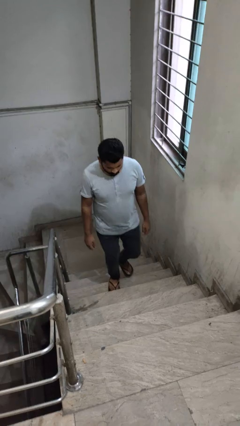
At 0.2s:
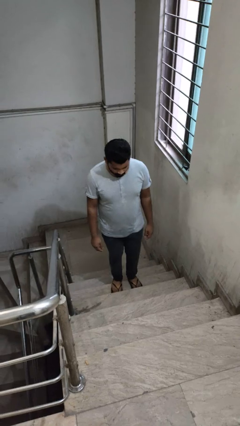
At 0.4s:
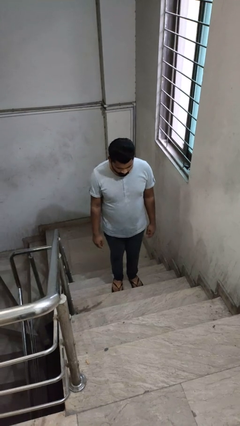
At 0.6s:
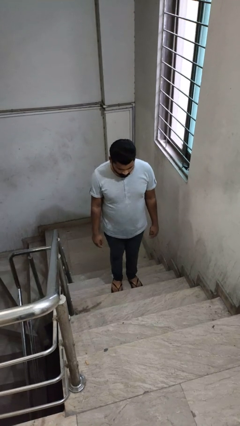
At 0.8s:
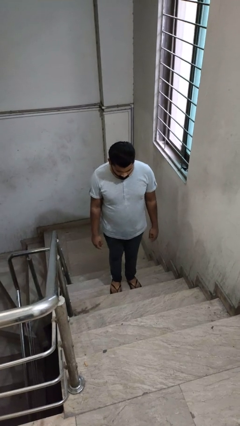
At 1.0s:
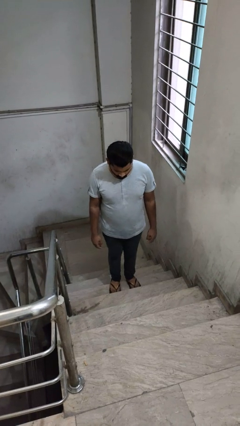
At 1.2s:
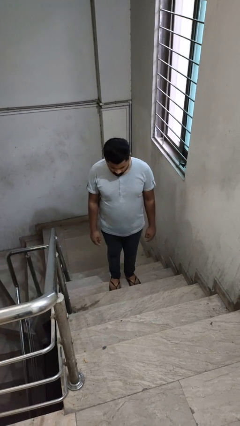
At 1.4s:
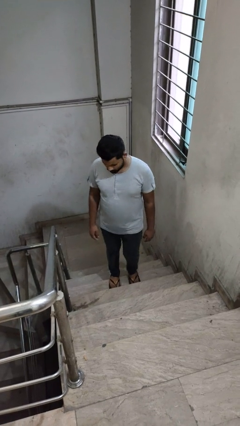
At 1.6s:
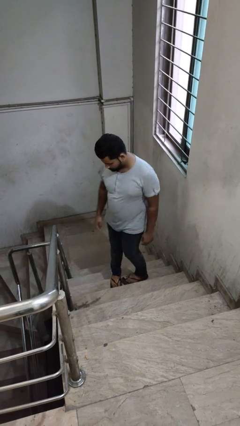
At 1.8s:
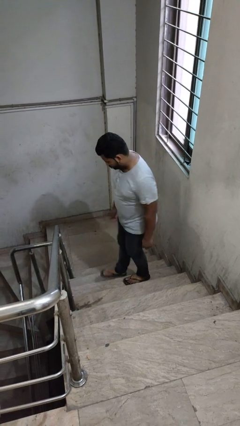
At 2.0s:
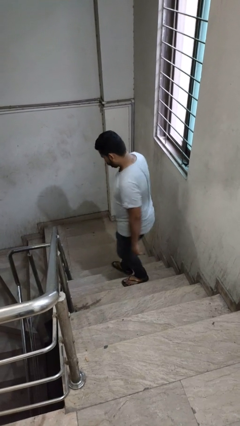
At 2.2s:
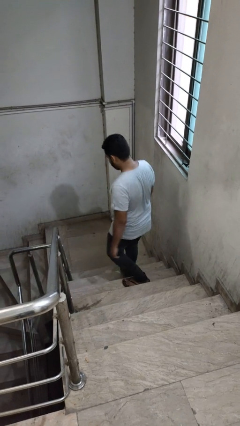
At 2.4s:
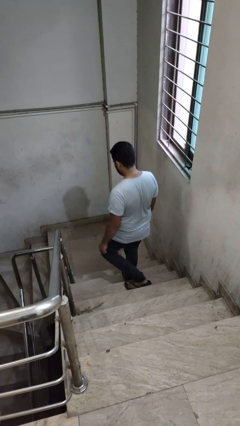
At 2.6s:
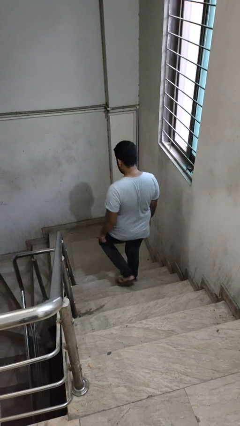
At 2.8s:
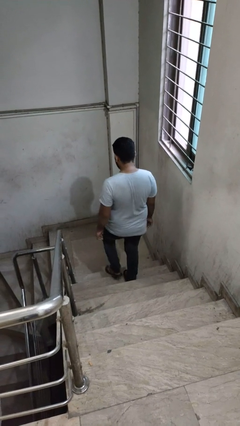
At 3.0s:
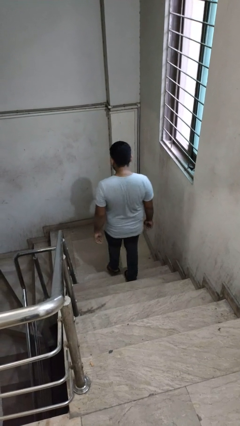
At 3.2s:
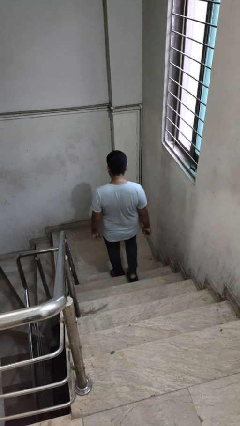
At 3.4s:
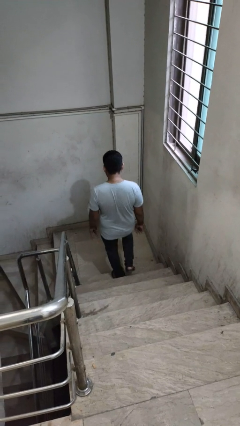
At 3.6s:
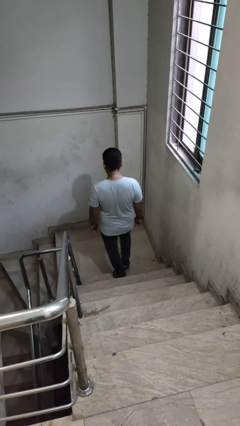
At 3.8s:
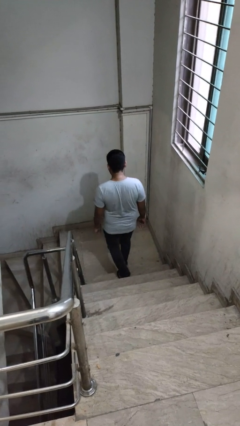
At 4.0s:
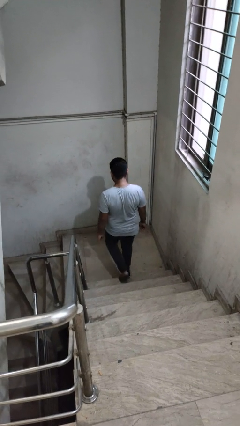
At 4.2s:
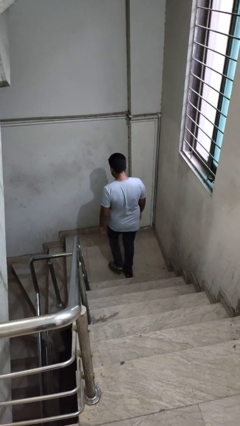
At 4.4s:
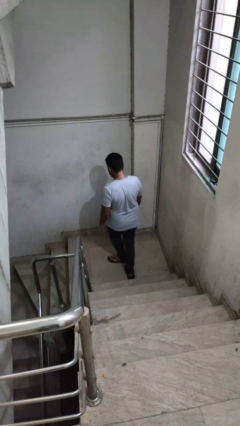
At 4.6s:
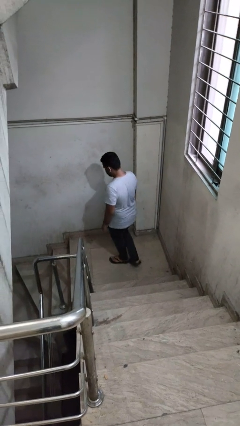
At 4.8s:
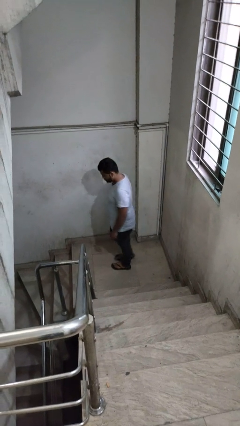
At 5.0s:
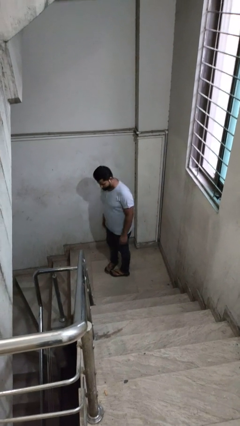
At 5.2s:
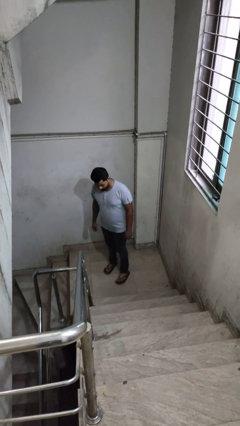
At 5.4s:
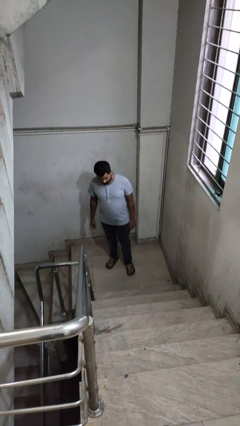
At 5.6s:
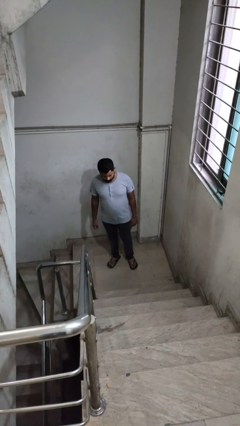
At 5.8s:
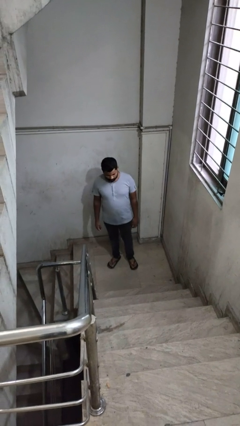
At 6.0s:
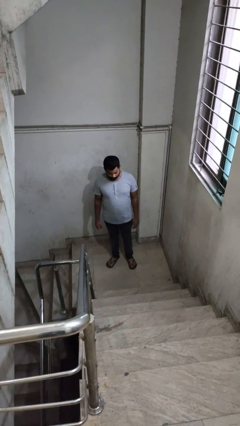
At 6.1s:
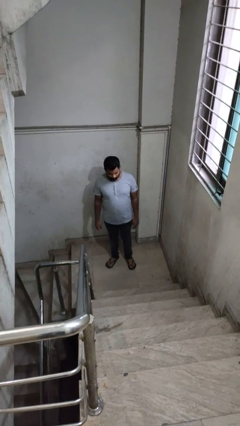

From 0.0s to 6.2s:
person climbs down stairs

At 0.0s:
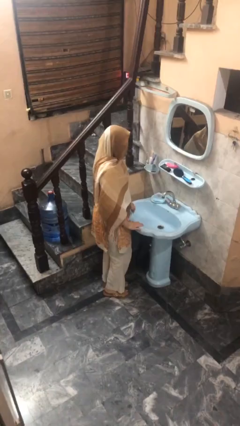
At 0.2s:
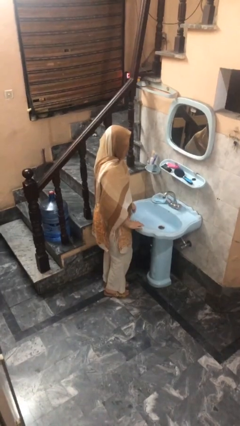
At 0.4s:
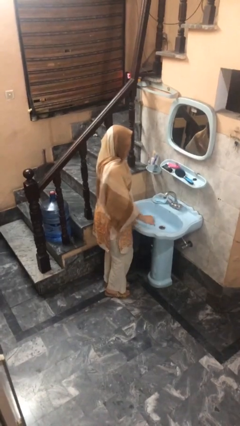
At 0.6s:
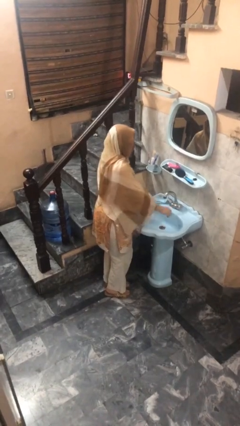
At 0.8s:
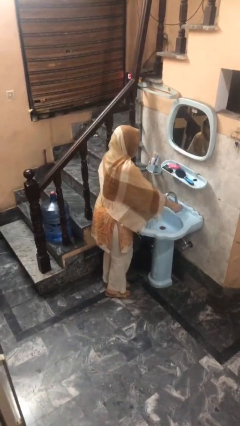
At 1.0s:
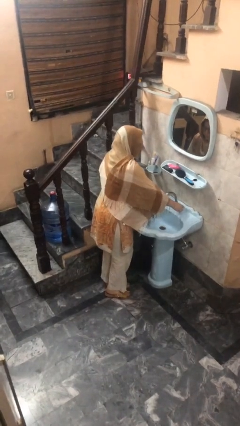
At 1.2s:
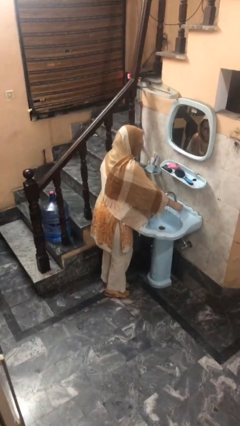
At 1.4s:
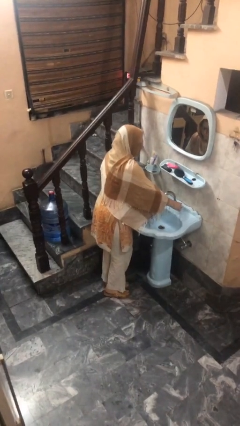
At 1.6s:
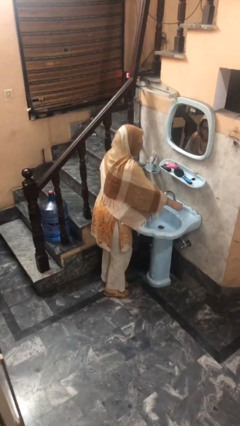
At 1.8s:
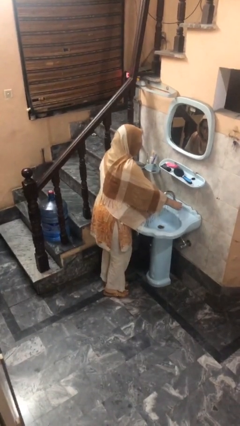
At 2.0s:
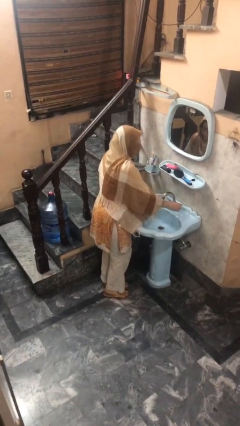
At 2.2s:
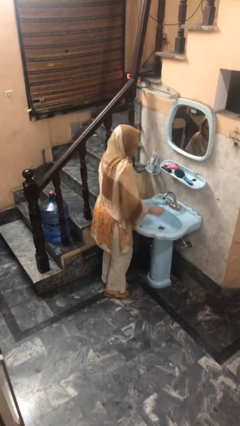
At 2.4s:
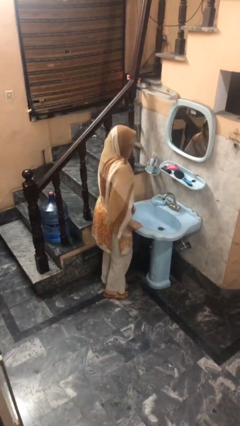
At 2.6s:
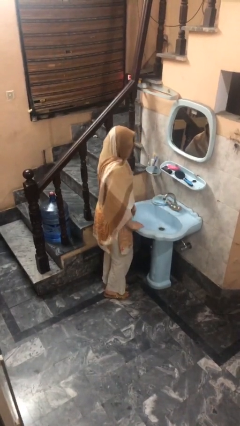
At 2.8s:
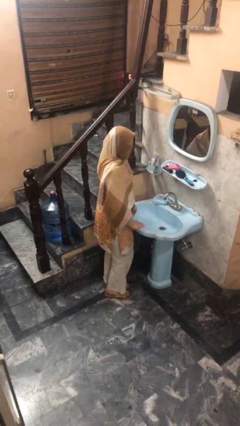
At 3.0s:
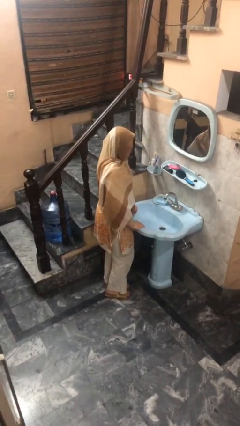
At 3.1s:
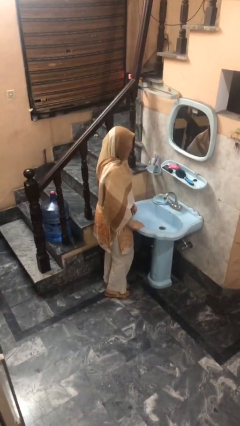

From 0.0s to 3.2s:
person turns on faucet

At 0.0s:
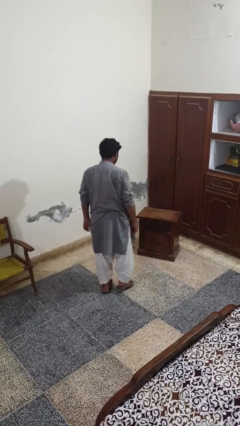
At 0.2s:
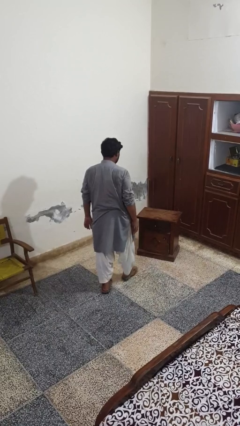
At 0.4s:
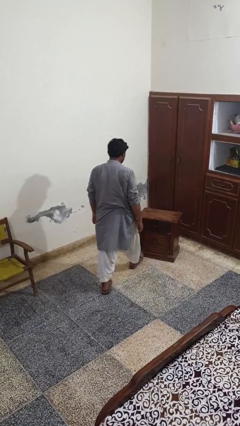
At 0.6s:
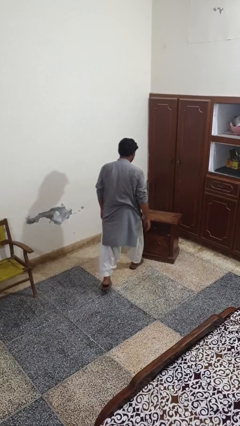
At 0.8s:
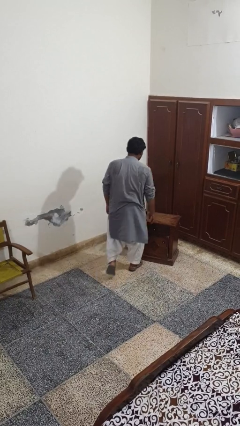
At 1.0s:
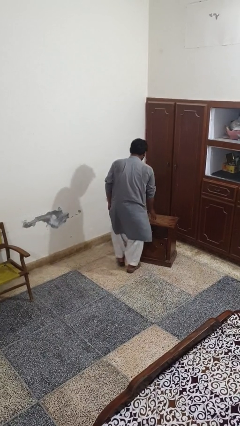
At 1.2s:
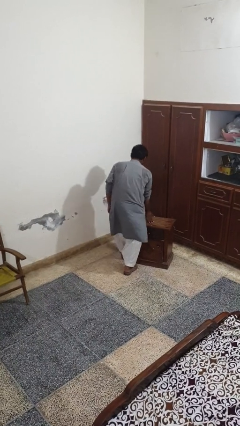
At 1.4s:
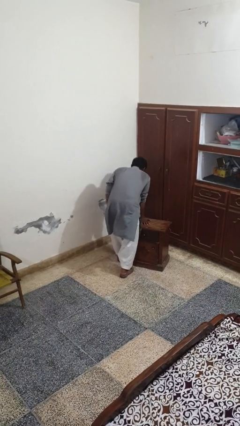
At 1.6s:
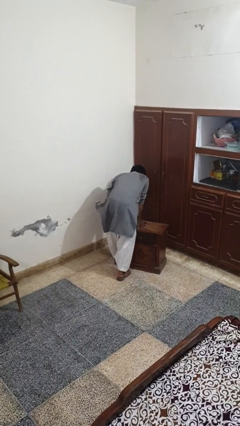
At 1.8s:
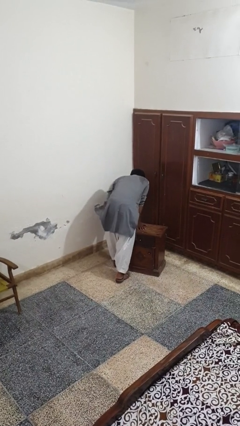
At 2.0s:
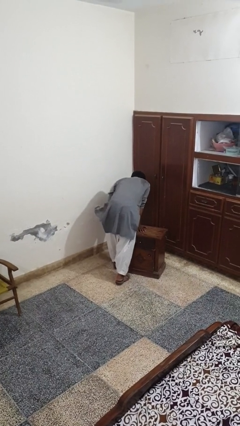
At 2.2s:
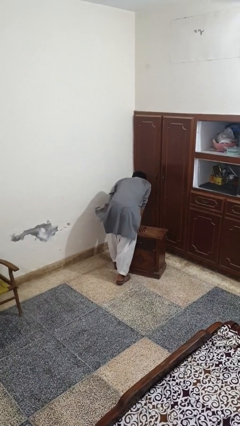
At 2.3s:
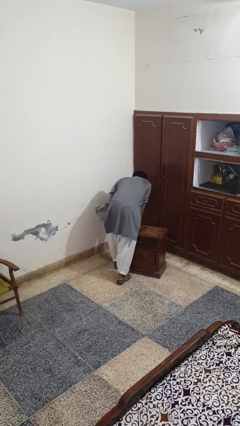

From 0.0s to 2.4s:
person bumps into table

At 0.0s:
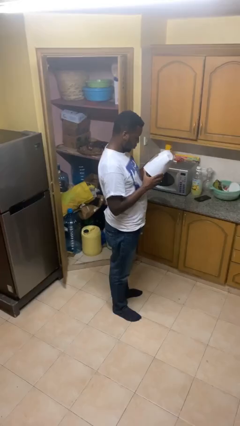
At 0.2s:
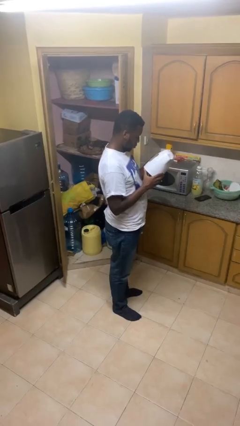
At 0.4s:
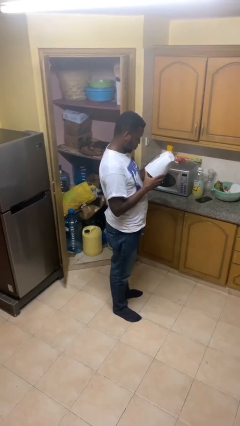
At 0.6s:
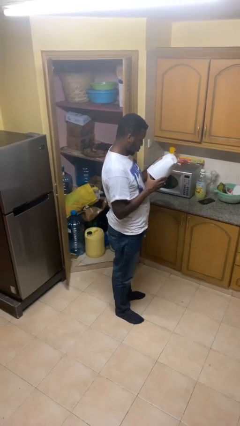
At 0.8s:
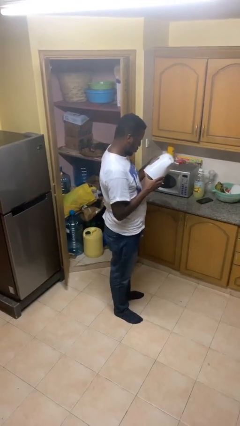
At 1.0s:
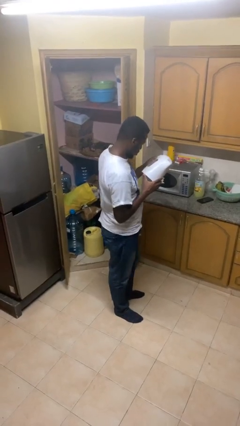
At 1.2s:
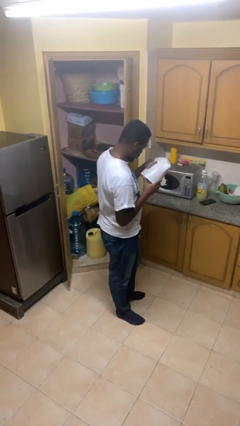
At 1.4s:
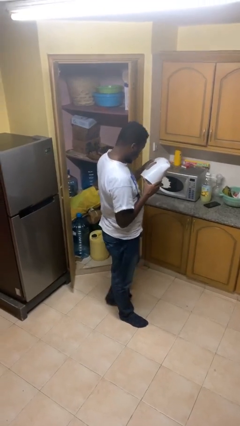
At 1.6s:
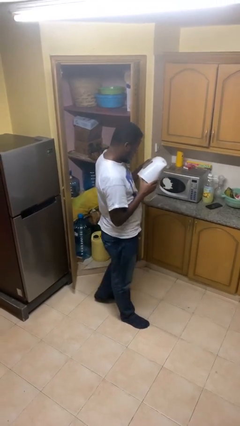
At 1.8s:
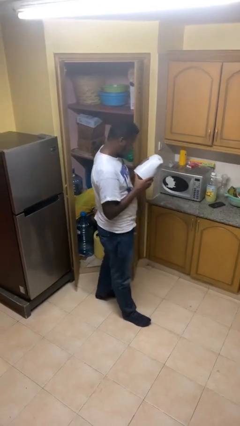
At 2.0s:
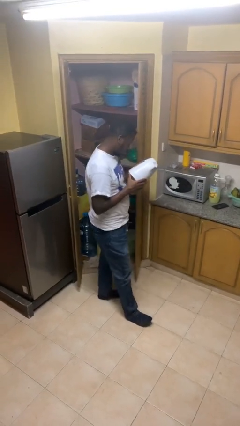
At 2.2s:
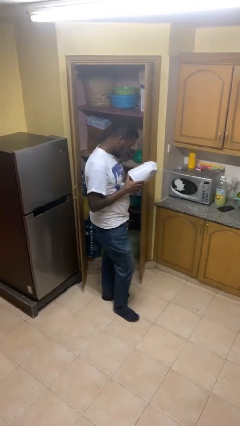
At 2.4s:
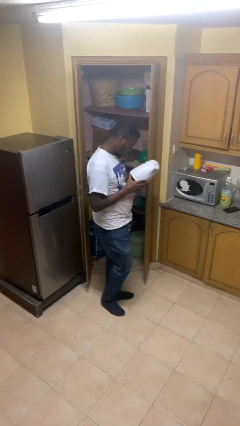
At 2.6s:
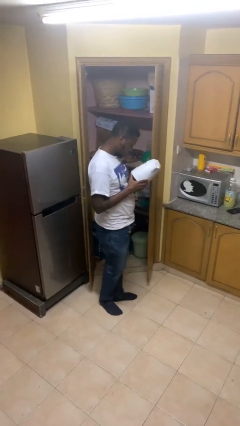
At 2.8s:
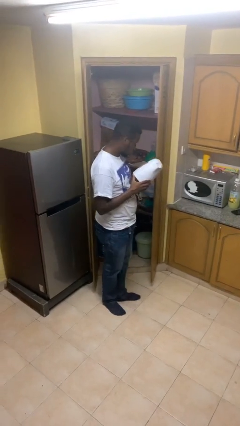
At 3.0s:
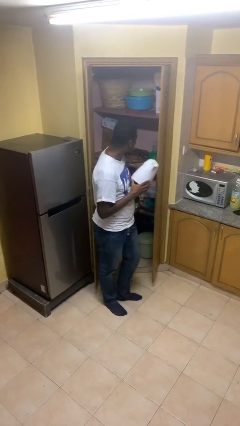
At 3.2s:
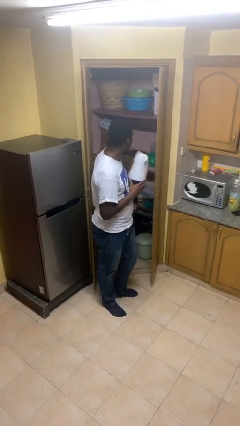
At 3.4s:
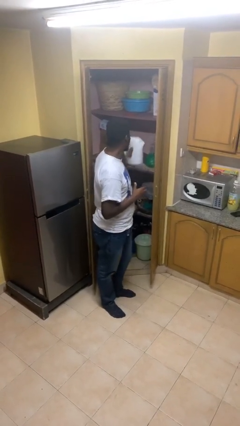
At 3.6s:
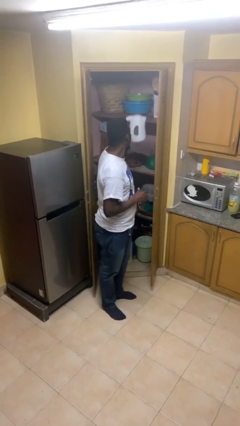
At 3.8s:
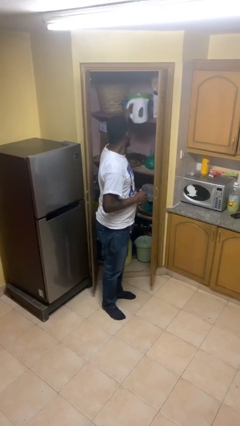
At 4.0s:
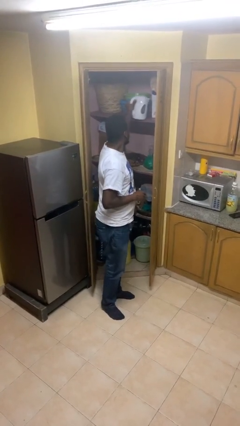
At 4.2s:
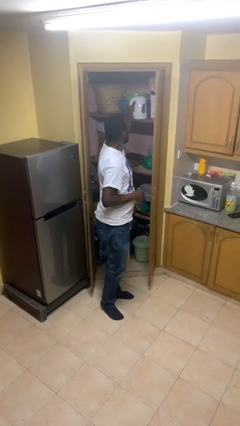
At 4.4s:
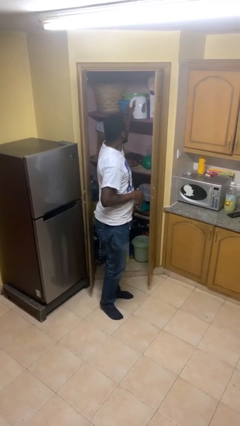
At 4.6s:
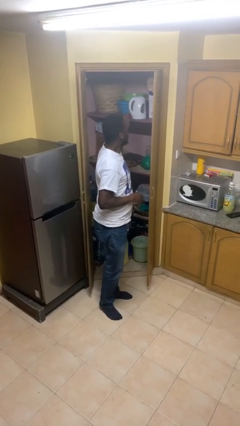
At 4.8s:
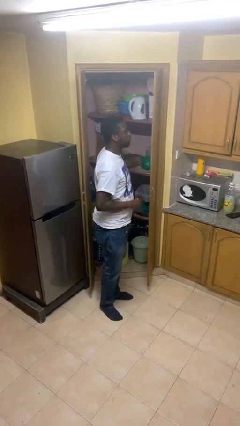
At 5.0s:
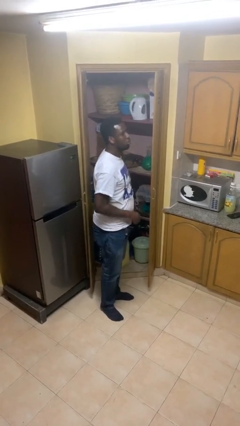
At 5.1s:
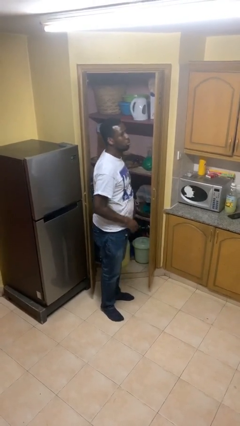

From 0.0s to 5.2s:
person puts down object on shelf

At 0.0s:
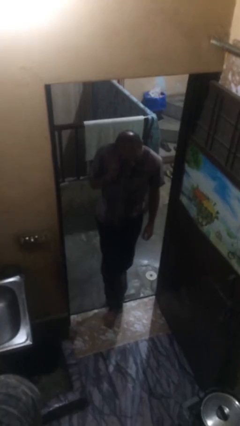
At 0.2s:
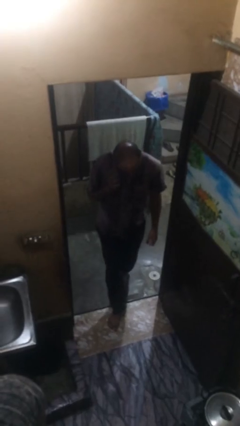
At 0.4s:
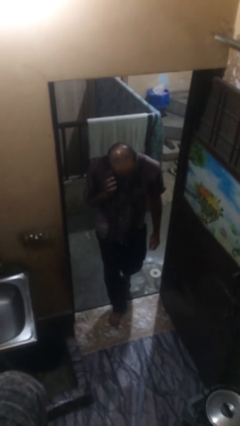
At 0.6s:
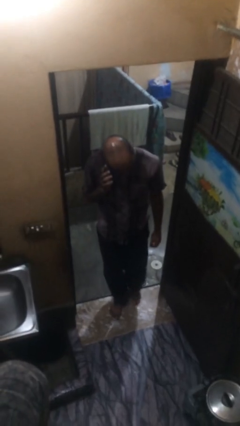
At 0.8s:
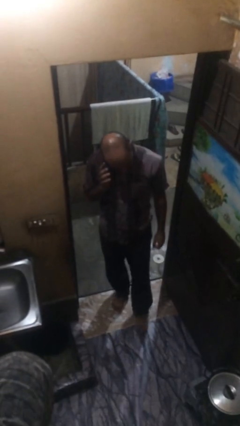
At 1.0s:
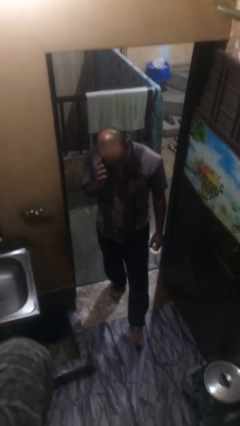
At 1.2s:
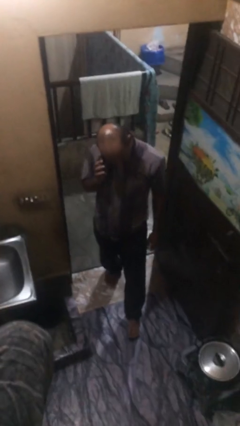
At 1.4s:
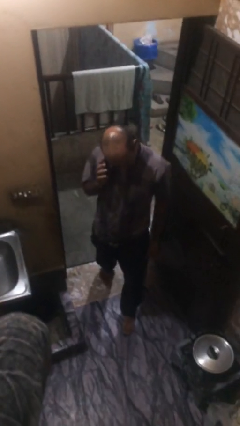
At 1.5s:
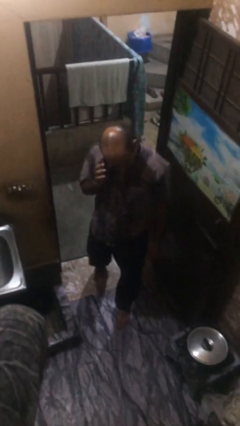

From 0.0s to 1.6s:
person enters scene through structure
